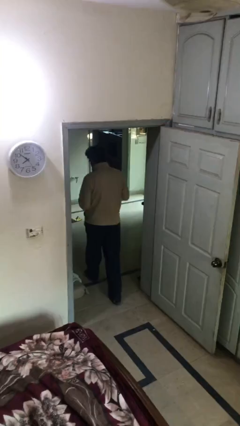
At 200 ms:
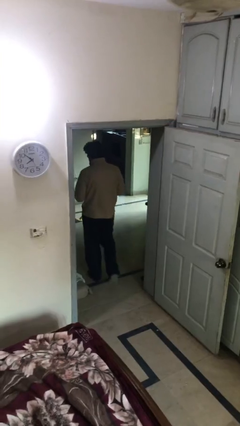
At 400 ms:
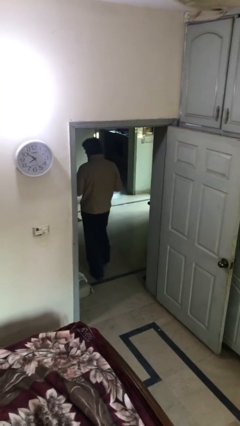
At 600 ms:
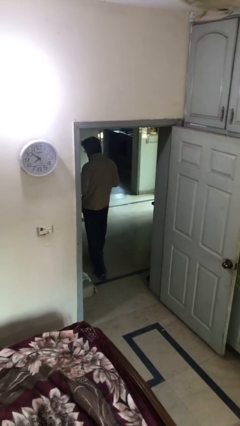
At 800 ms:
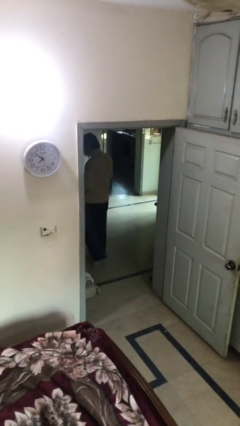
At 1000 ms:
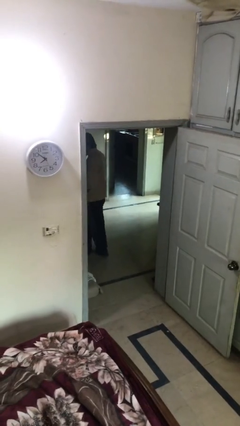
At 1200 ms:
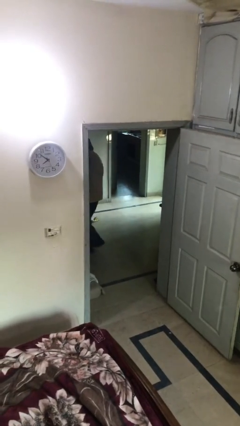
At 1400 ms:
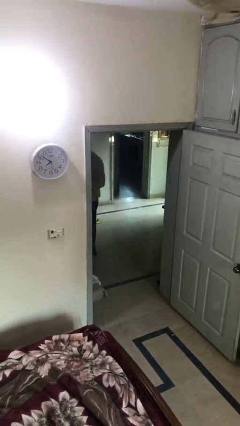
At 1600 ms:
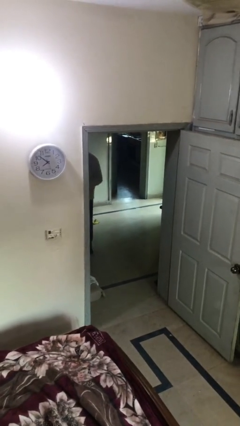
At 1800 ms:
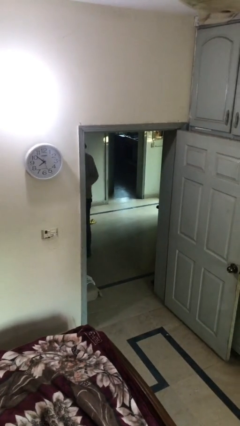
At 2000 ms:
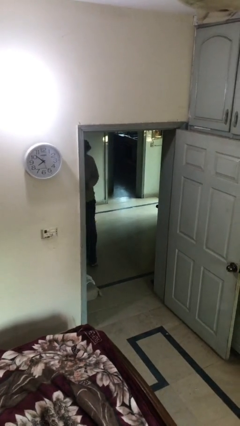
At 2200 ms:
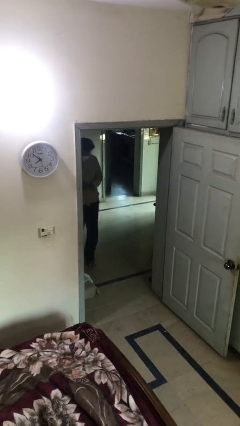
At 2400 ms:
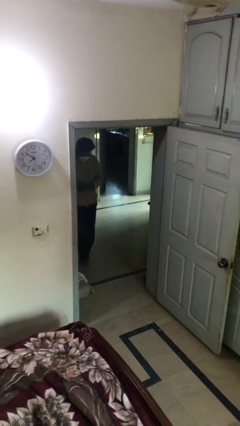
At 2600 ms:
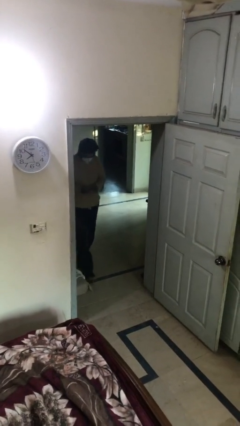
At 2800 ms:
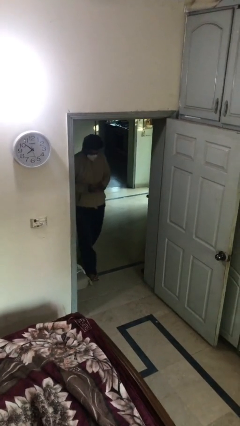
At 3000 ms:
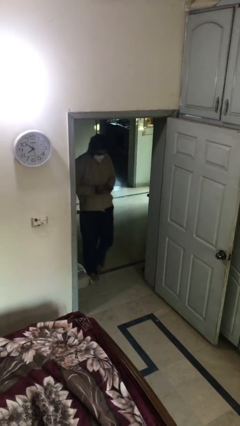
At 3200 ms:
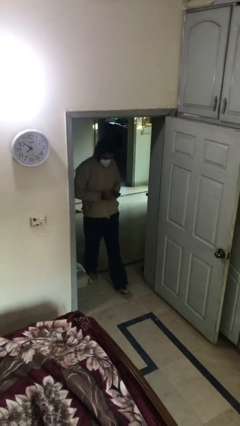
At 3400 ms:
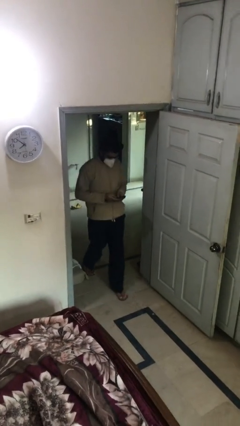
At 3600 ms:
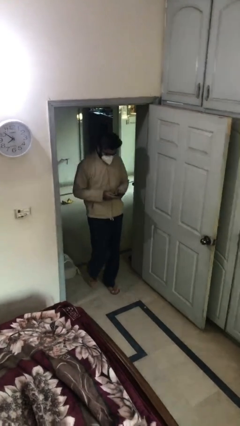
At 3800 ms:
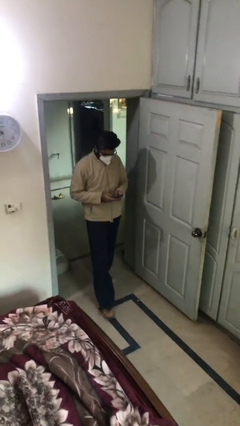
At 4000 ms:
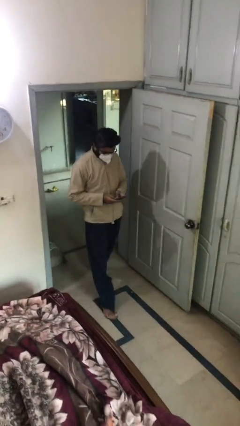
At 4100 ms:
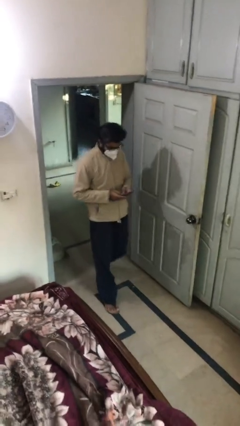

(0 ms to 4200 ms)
person enters scene through structure

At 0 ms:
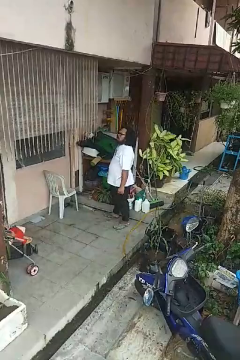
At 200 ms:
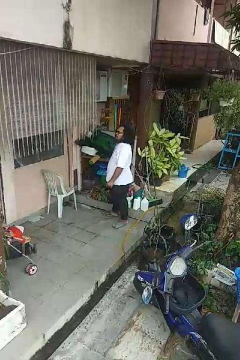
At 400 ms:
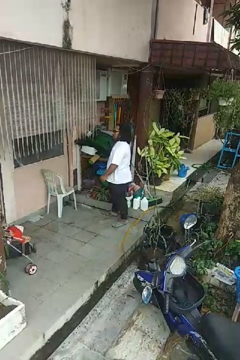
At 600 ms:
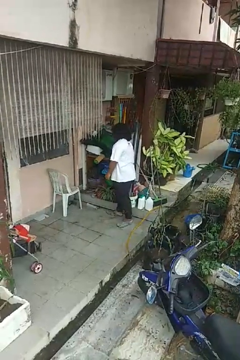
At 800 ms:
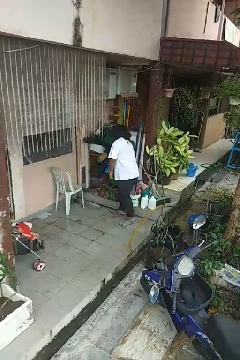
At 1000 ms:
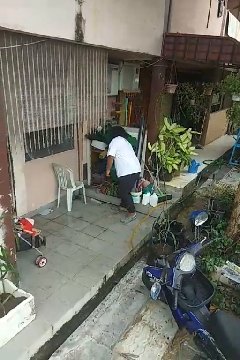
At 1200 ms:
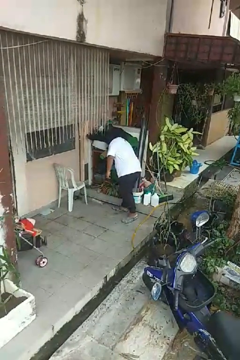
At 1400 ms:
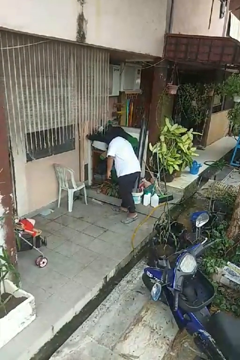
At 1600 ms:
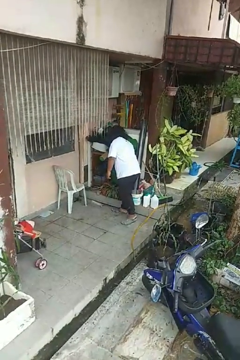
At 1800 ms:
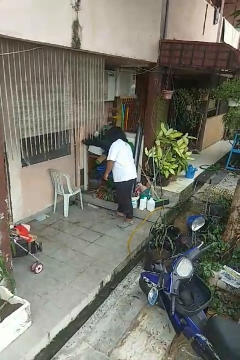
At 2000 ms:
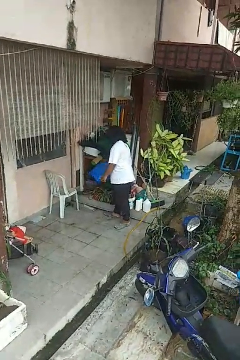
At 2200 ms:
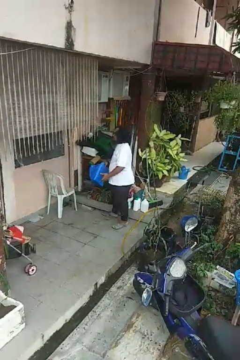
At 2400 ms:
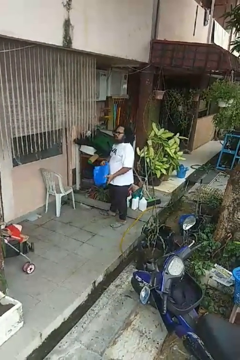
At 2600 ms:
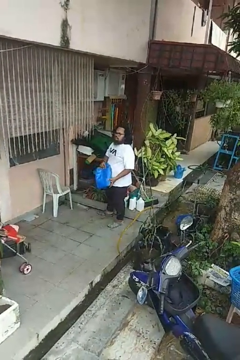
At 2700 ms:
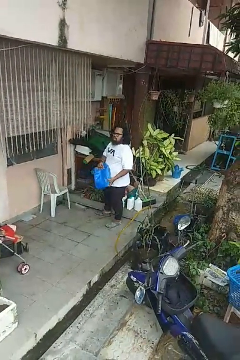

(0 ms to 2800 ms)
person picks up object from cabinet

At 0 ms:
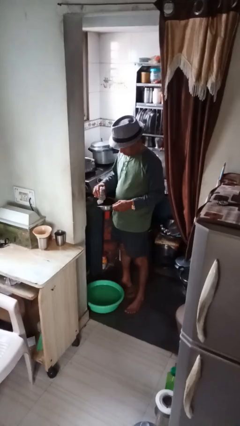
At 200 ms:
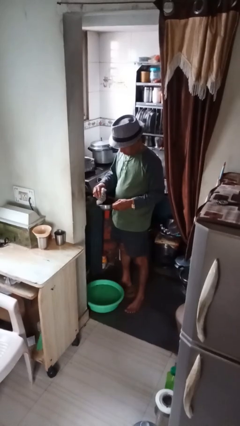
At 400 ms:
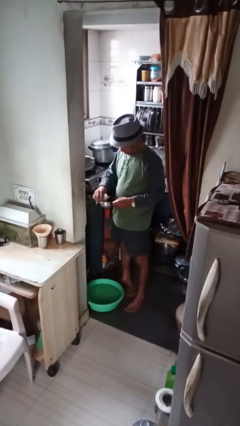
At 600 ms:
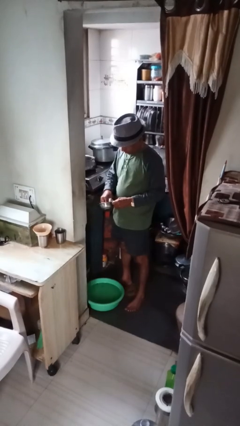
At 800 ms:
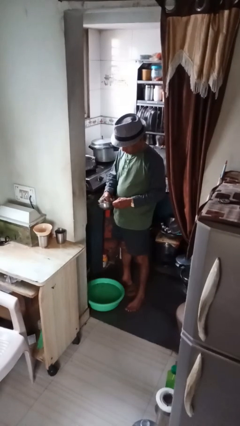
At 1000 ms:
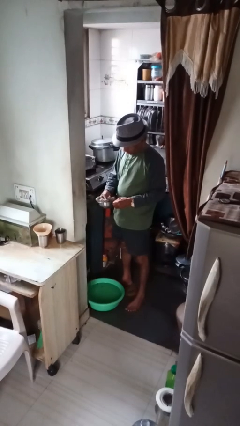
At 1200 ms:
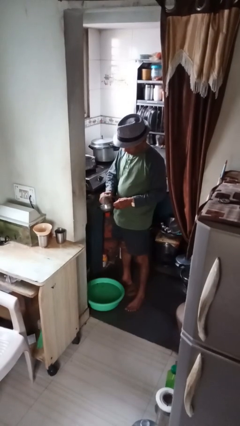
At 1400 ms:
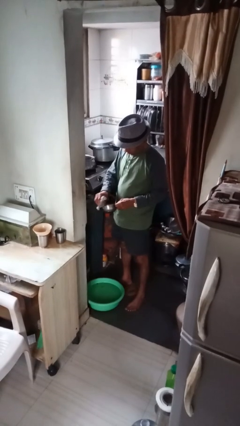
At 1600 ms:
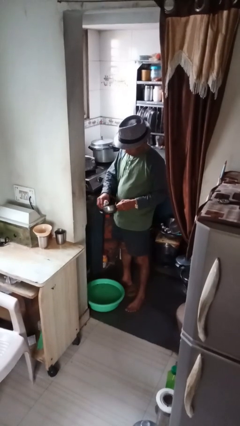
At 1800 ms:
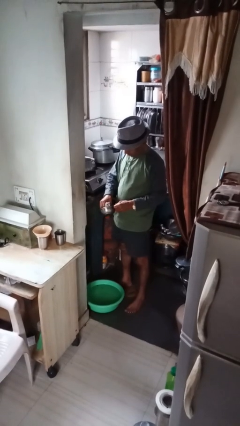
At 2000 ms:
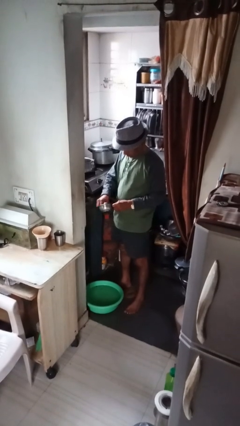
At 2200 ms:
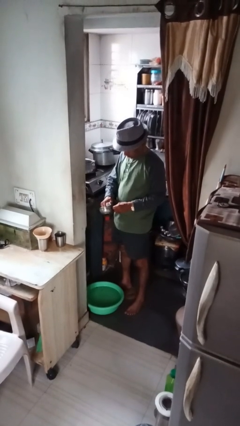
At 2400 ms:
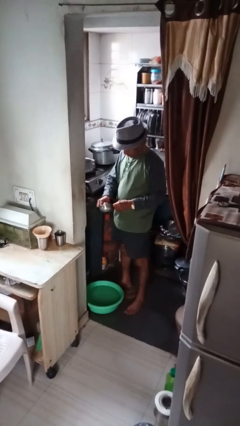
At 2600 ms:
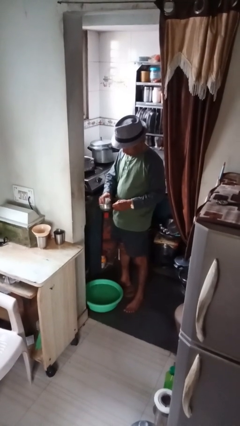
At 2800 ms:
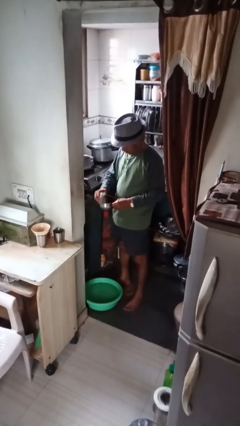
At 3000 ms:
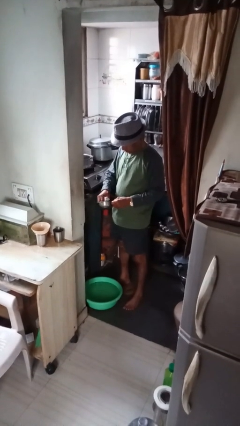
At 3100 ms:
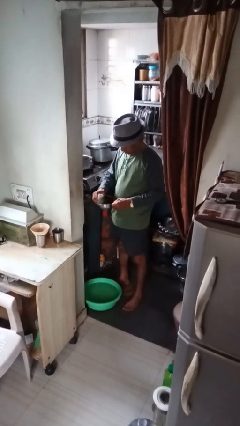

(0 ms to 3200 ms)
person dries dish

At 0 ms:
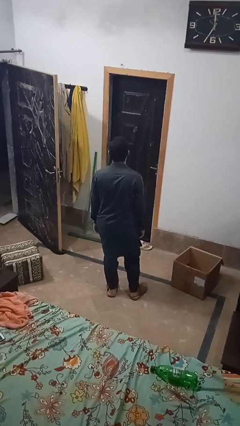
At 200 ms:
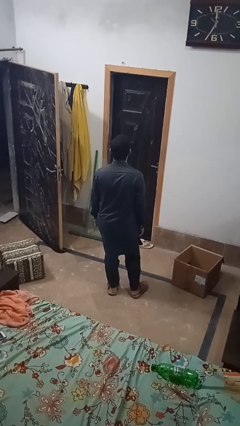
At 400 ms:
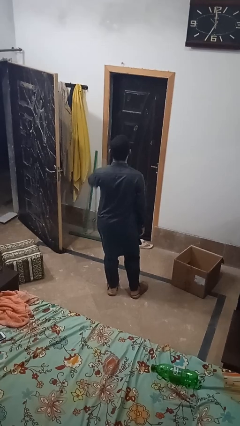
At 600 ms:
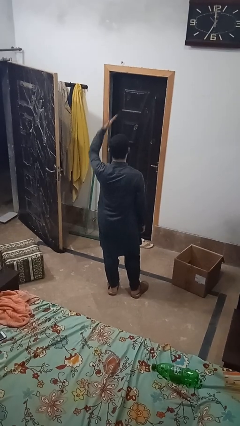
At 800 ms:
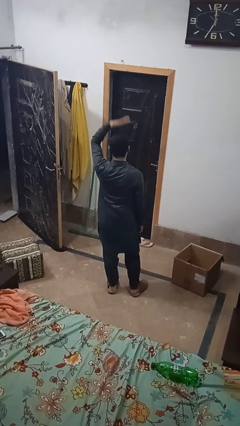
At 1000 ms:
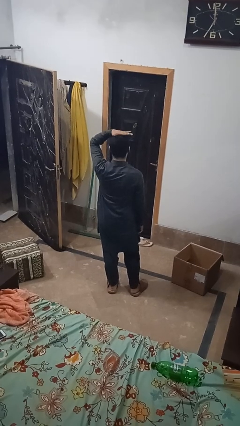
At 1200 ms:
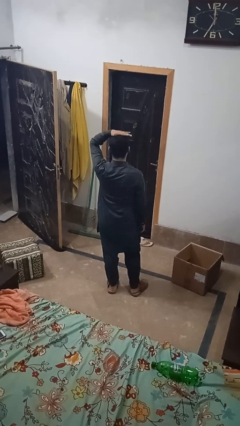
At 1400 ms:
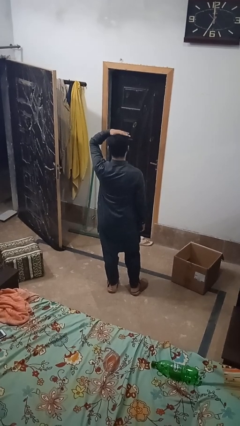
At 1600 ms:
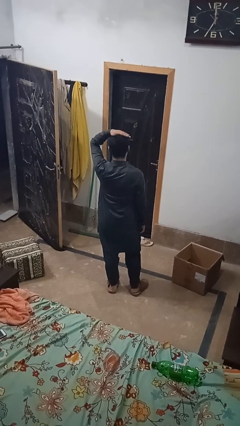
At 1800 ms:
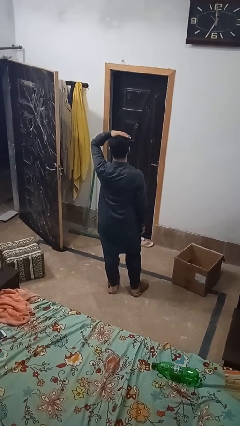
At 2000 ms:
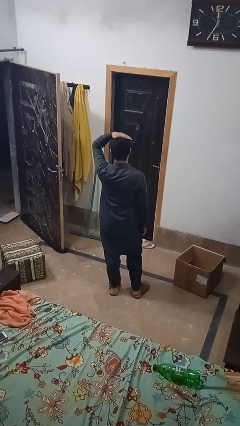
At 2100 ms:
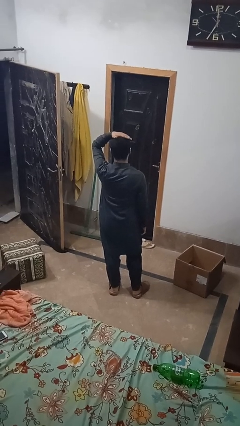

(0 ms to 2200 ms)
person pats head

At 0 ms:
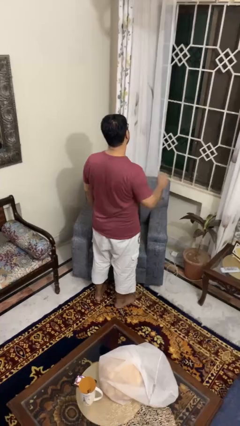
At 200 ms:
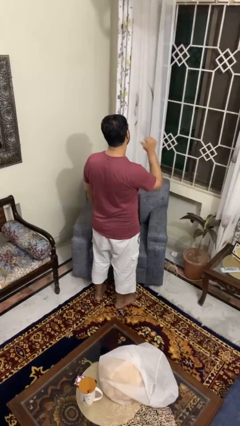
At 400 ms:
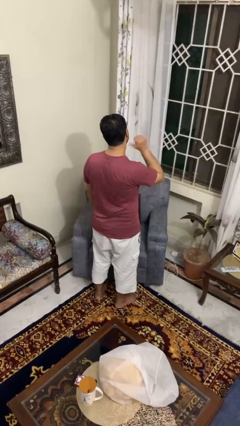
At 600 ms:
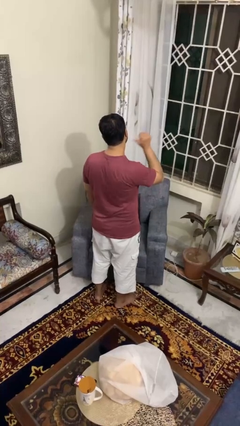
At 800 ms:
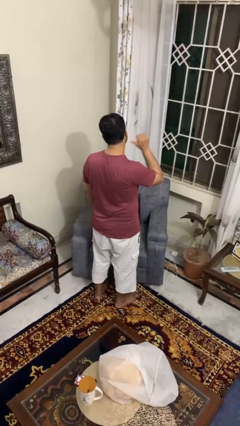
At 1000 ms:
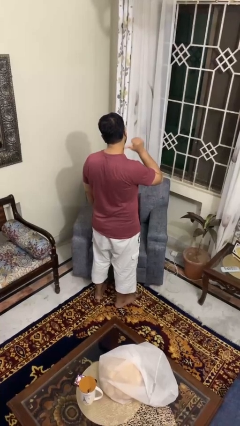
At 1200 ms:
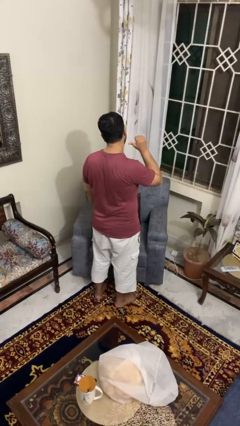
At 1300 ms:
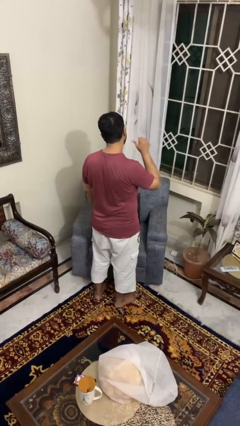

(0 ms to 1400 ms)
person gestures behind me

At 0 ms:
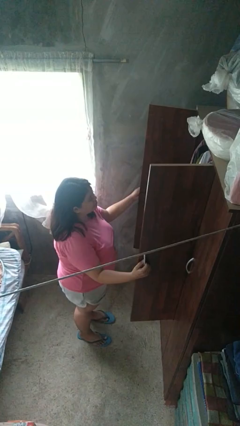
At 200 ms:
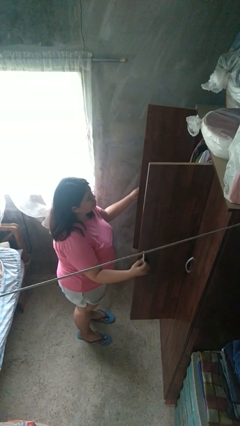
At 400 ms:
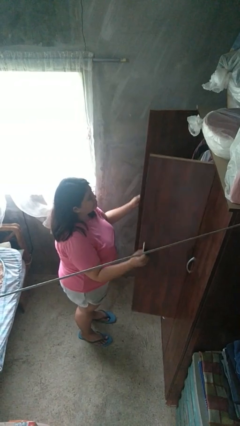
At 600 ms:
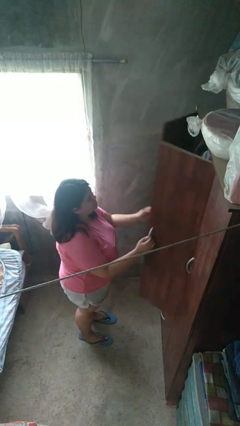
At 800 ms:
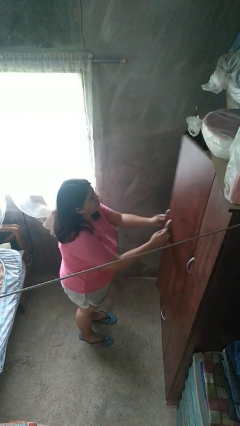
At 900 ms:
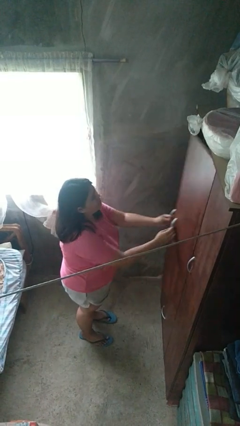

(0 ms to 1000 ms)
person closes closet door

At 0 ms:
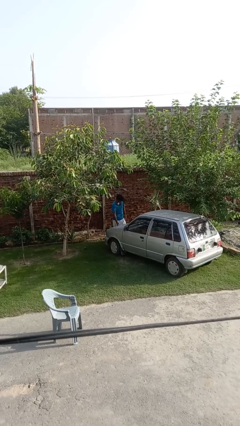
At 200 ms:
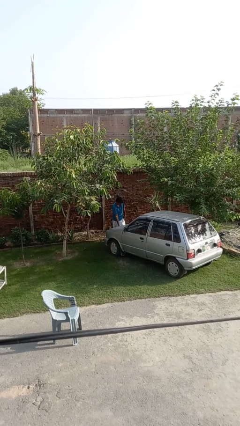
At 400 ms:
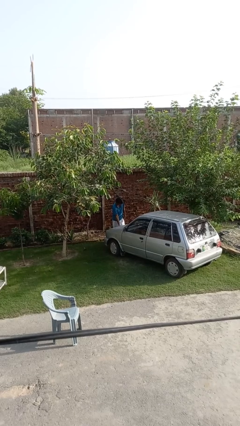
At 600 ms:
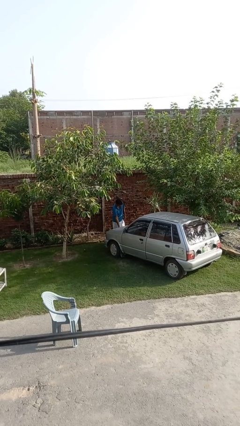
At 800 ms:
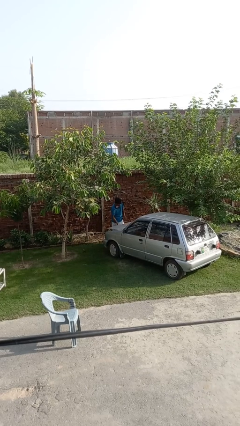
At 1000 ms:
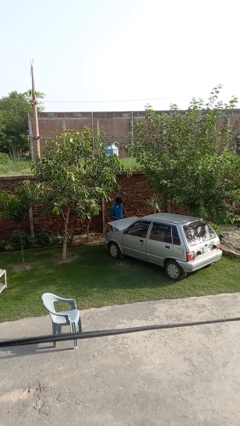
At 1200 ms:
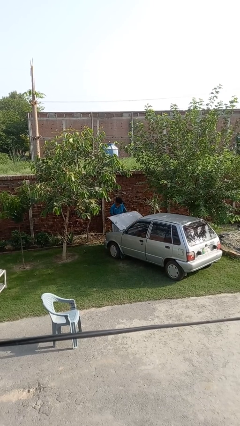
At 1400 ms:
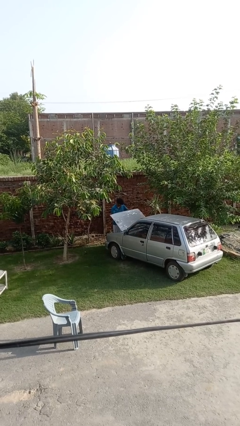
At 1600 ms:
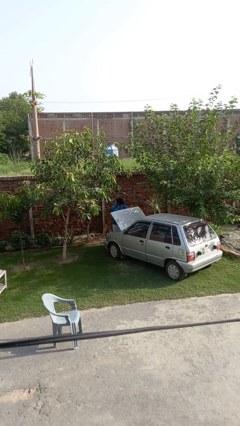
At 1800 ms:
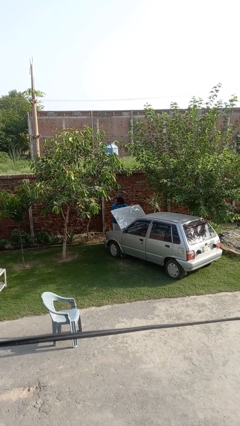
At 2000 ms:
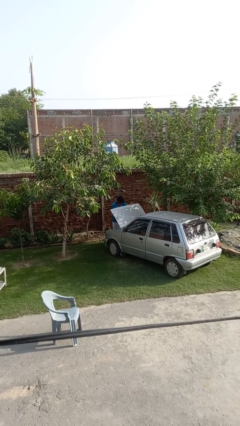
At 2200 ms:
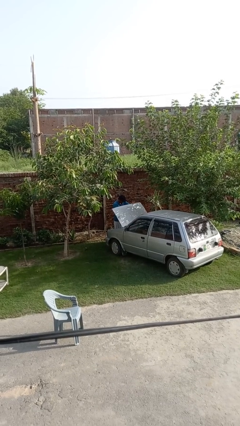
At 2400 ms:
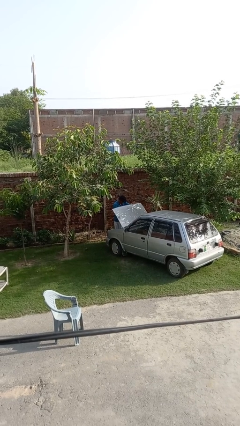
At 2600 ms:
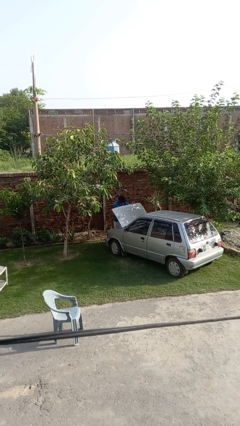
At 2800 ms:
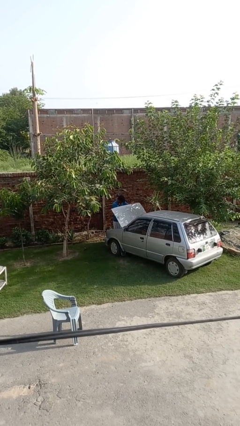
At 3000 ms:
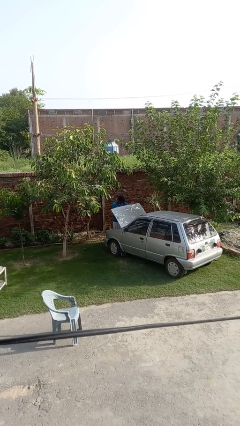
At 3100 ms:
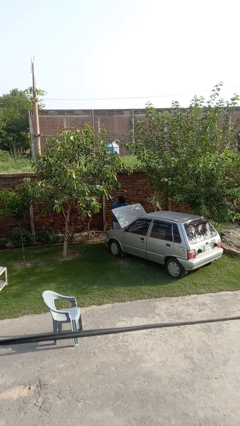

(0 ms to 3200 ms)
person opens car hood
